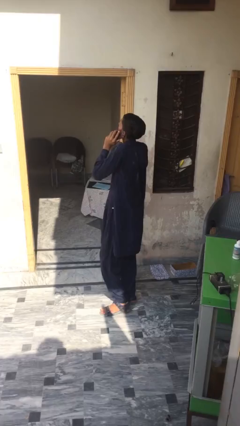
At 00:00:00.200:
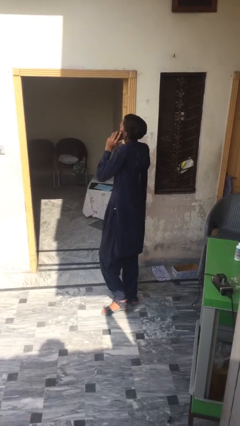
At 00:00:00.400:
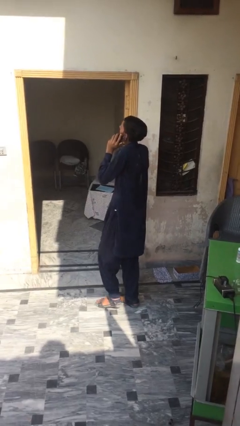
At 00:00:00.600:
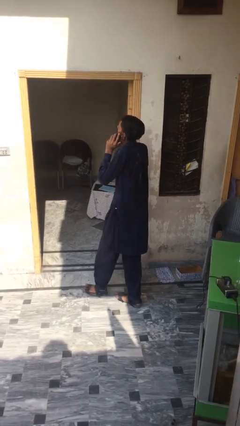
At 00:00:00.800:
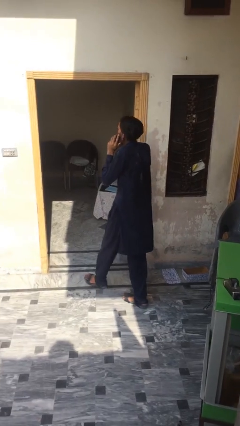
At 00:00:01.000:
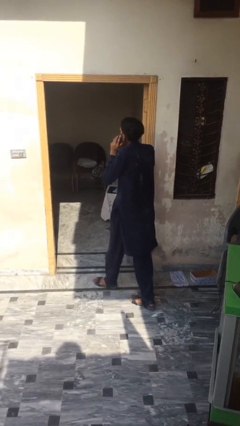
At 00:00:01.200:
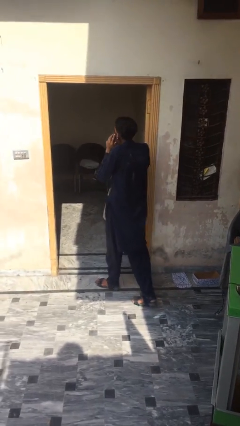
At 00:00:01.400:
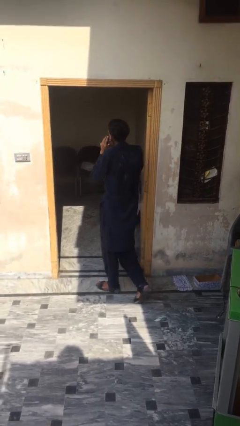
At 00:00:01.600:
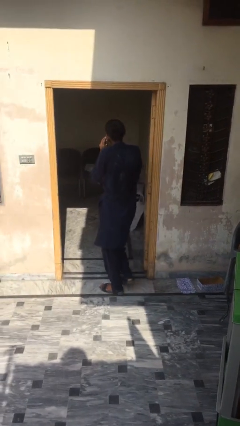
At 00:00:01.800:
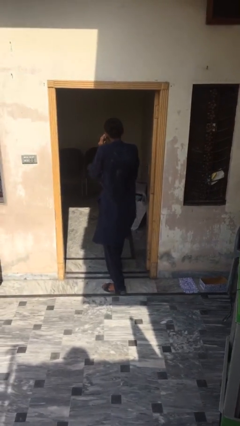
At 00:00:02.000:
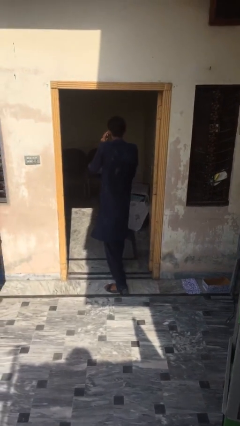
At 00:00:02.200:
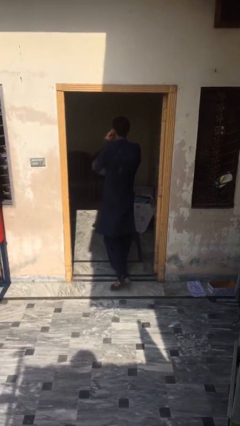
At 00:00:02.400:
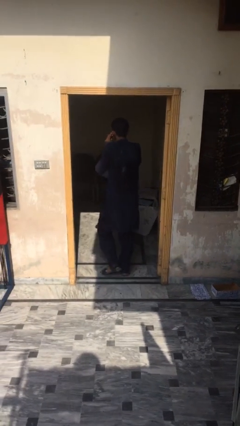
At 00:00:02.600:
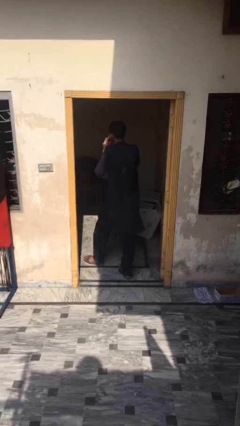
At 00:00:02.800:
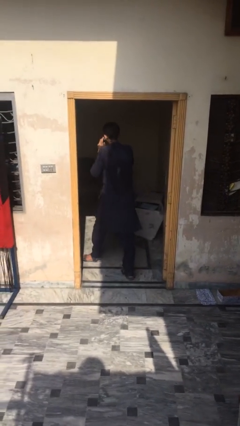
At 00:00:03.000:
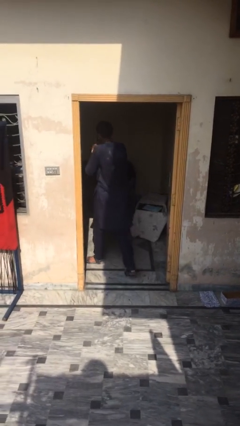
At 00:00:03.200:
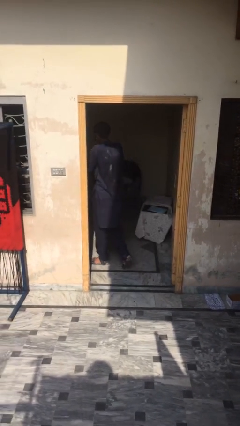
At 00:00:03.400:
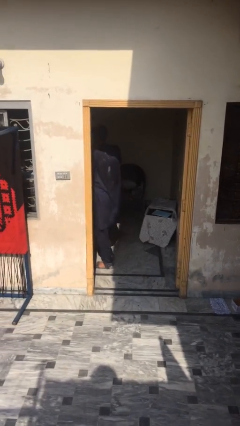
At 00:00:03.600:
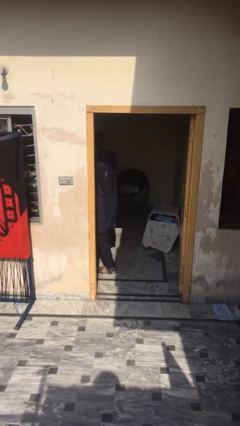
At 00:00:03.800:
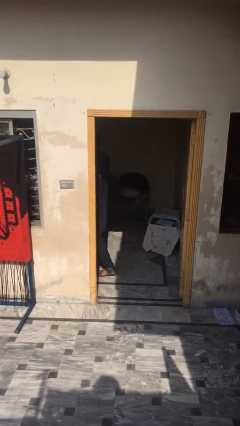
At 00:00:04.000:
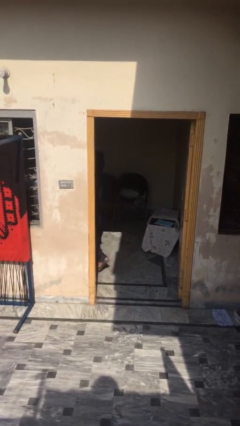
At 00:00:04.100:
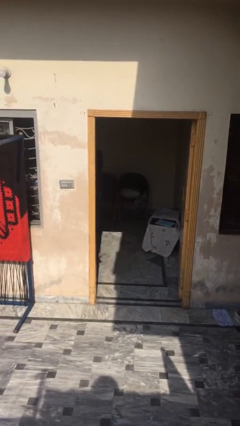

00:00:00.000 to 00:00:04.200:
person exits scene through structure

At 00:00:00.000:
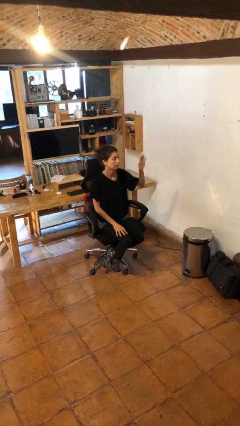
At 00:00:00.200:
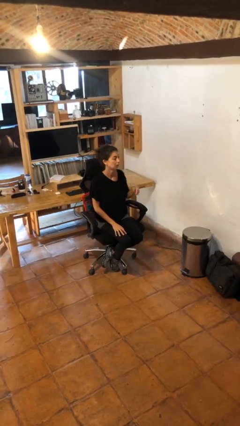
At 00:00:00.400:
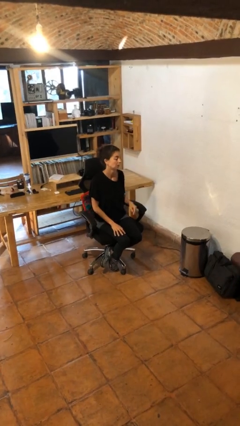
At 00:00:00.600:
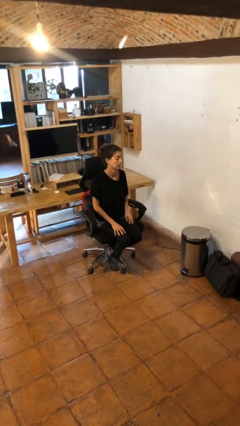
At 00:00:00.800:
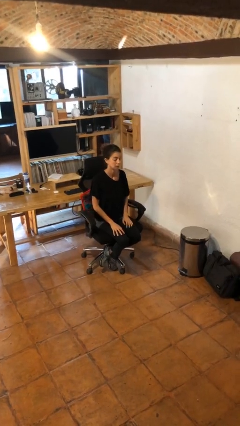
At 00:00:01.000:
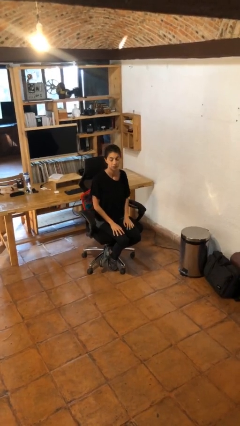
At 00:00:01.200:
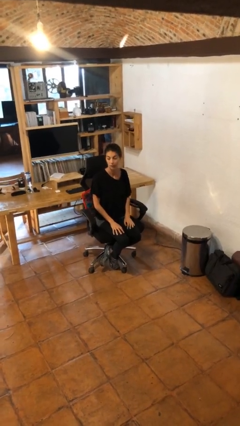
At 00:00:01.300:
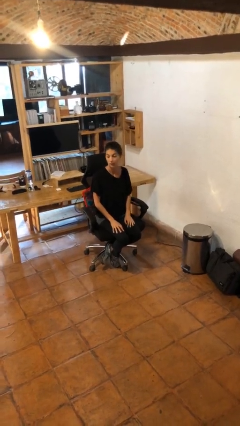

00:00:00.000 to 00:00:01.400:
person gestures lower hand

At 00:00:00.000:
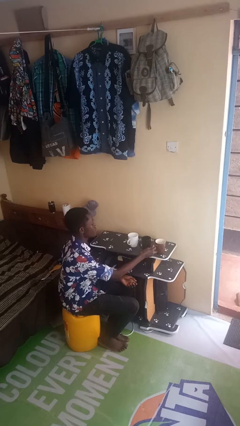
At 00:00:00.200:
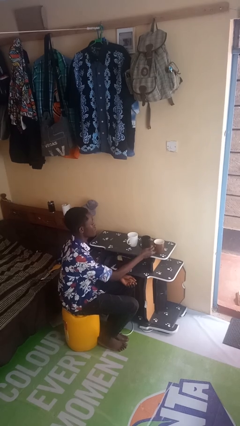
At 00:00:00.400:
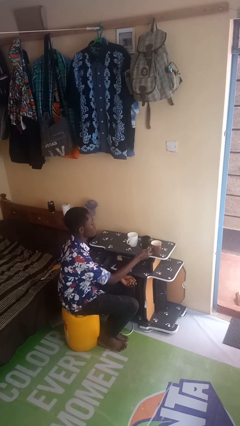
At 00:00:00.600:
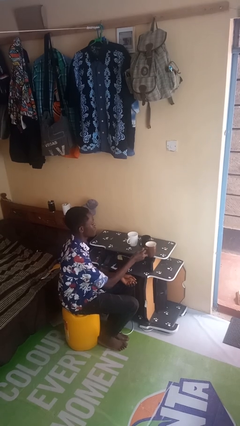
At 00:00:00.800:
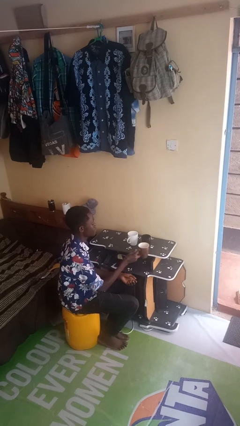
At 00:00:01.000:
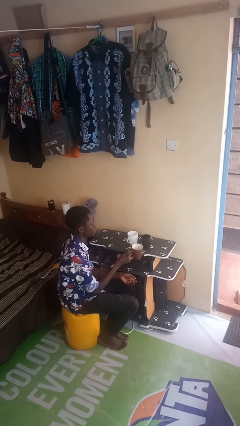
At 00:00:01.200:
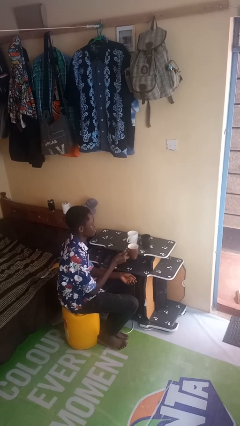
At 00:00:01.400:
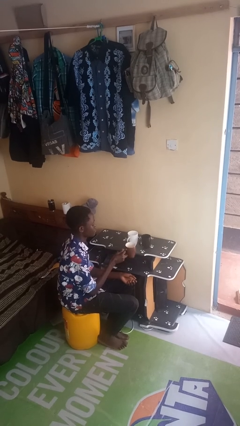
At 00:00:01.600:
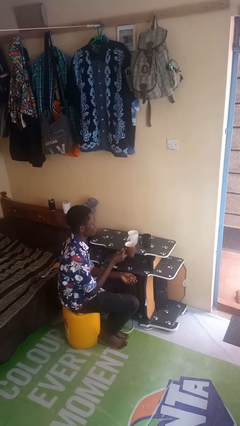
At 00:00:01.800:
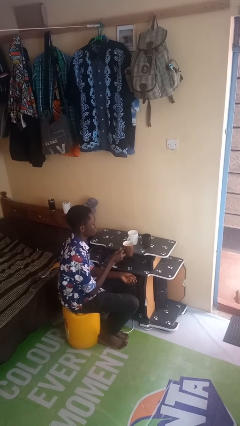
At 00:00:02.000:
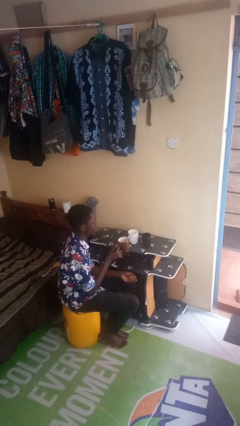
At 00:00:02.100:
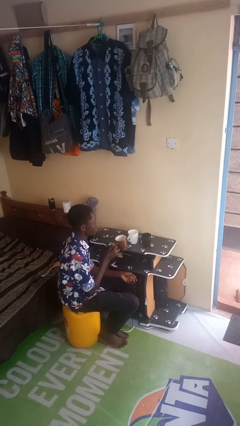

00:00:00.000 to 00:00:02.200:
person picks up object from table

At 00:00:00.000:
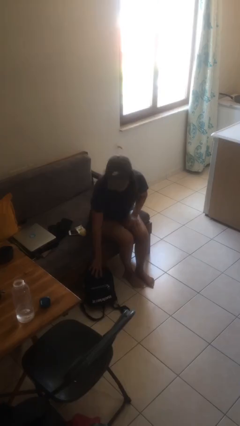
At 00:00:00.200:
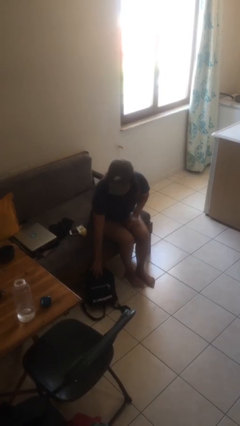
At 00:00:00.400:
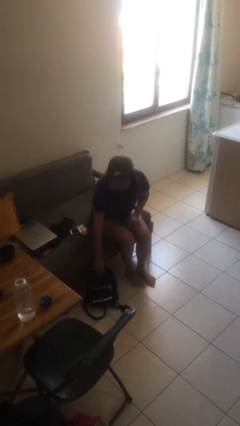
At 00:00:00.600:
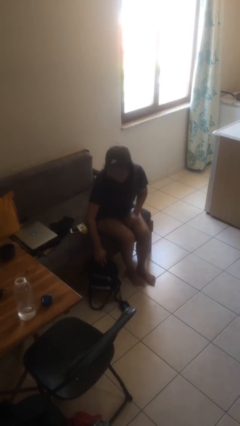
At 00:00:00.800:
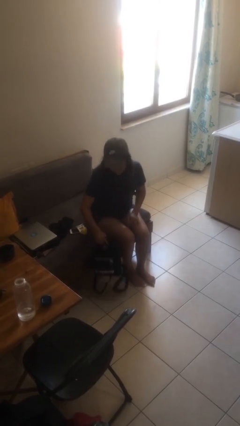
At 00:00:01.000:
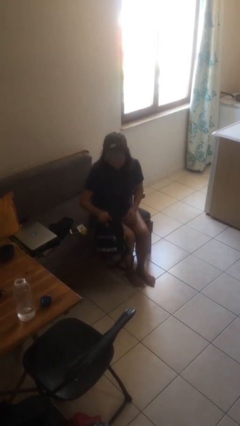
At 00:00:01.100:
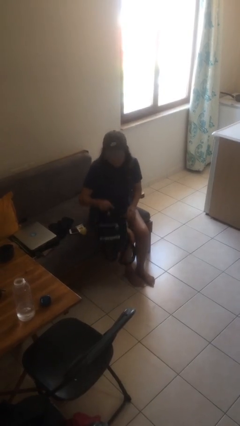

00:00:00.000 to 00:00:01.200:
person picks up object from floor

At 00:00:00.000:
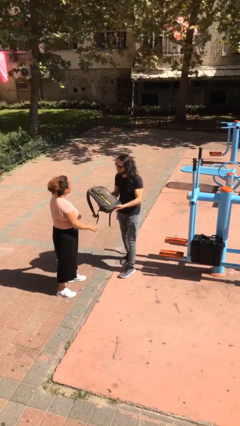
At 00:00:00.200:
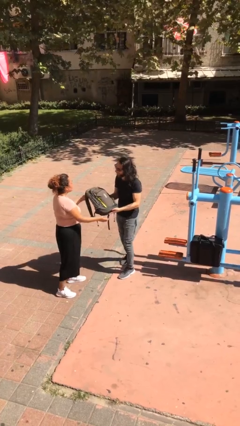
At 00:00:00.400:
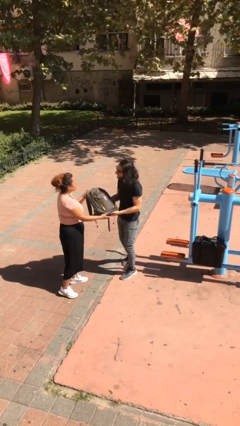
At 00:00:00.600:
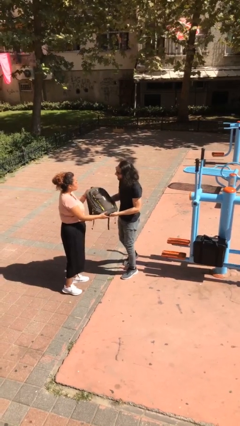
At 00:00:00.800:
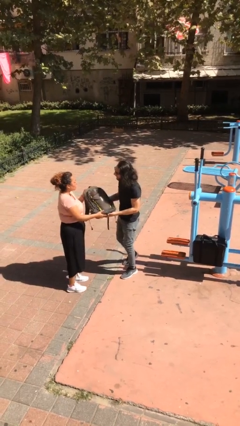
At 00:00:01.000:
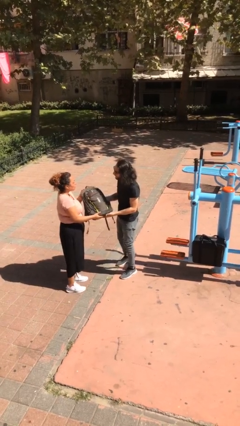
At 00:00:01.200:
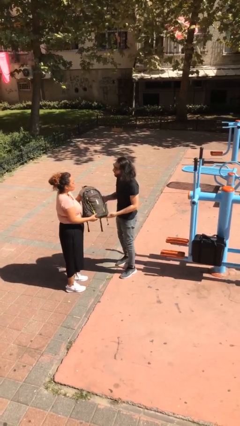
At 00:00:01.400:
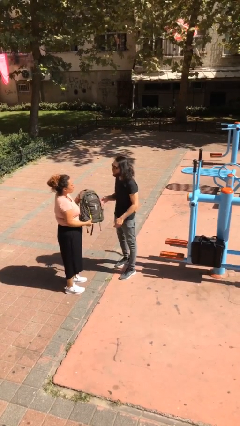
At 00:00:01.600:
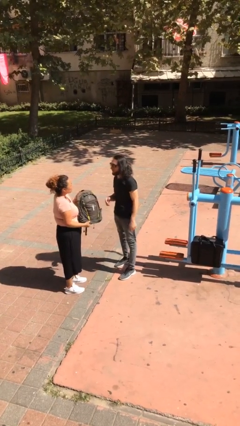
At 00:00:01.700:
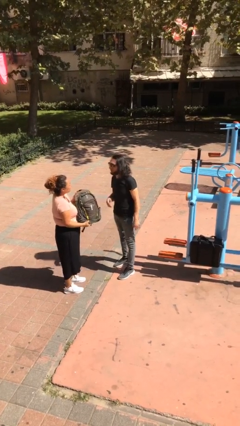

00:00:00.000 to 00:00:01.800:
person transfers object to person

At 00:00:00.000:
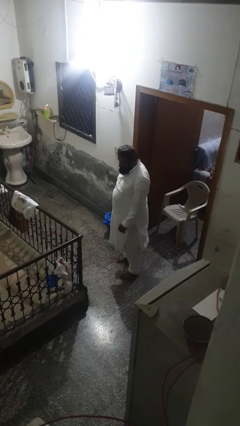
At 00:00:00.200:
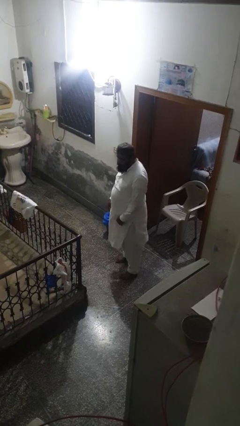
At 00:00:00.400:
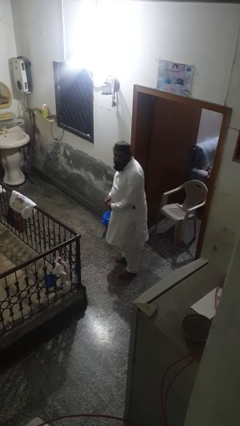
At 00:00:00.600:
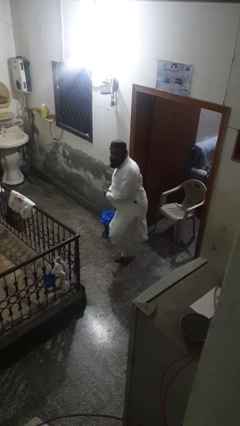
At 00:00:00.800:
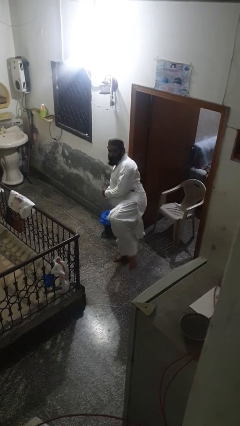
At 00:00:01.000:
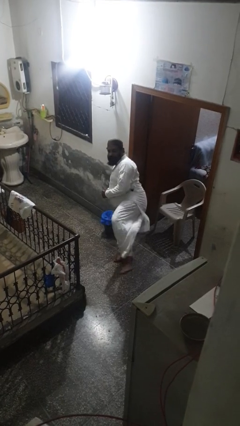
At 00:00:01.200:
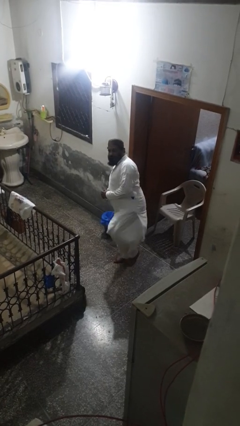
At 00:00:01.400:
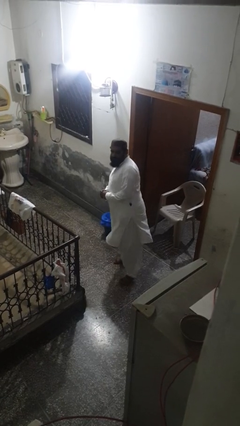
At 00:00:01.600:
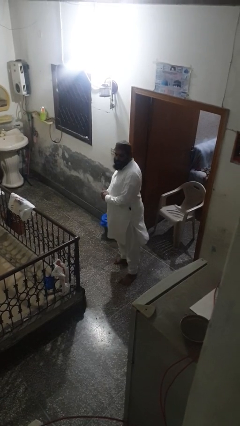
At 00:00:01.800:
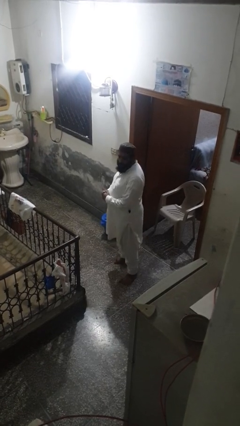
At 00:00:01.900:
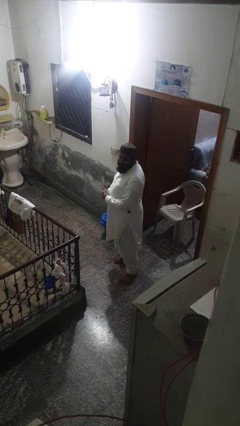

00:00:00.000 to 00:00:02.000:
person karate kicks

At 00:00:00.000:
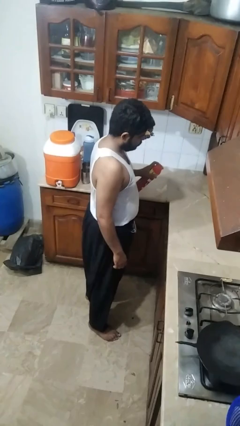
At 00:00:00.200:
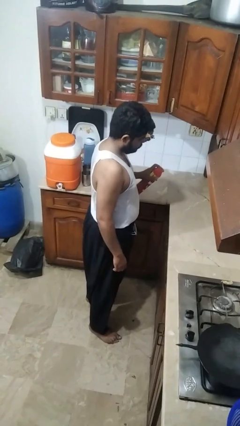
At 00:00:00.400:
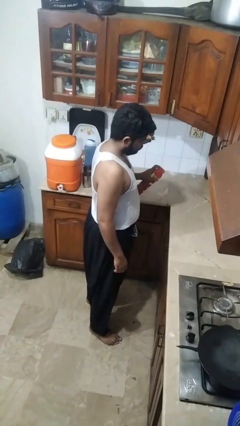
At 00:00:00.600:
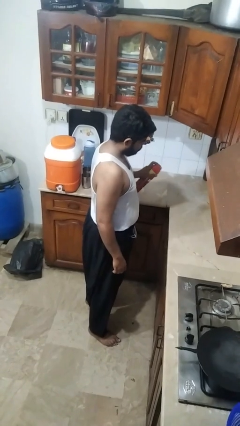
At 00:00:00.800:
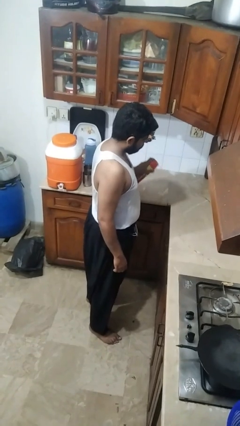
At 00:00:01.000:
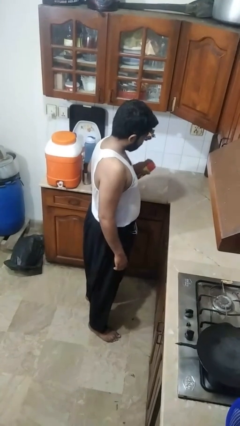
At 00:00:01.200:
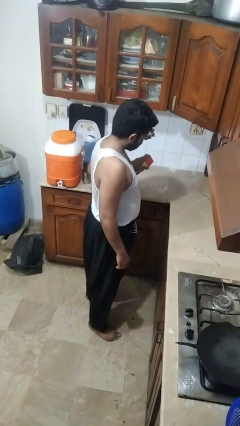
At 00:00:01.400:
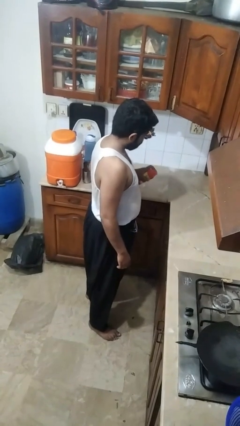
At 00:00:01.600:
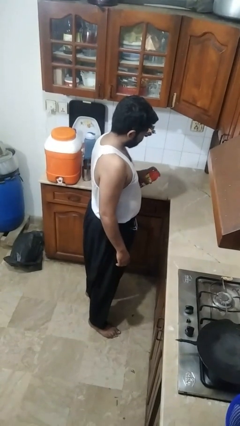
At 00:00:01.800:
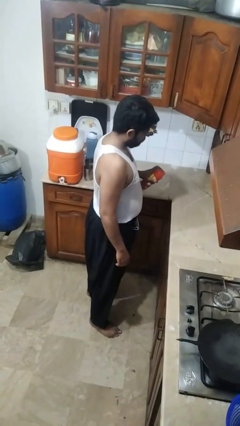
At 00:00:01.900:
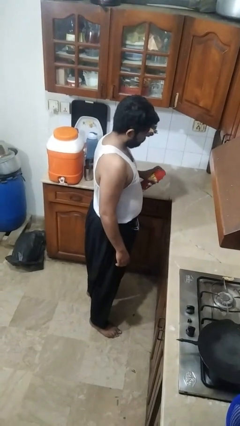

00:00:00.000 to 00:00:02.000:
person sprays from bottle

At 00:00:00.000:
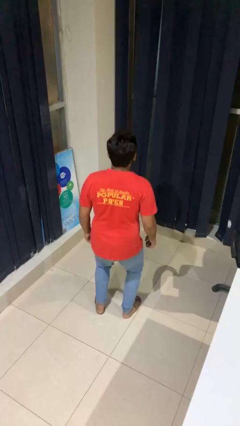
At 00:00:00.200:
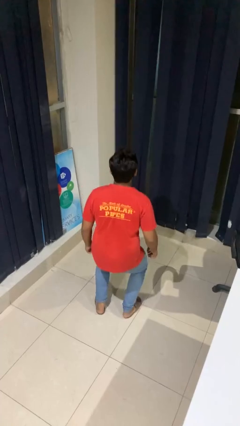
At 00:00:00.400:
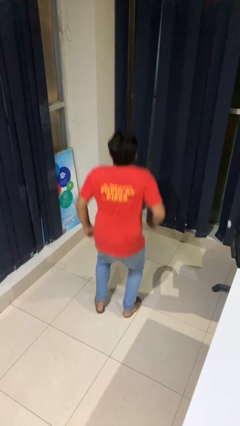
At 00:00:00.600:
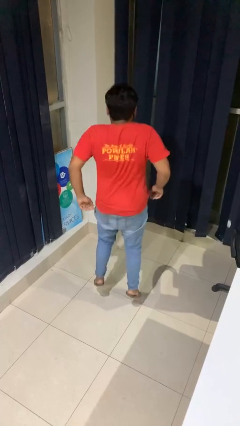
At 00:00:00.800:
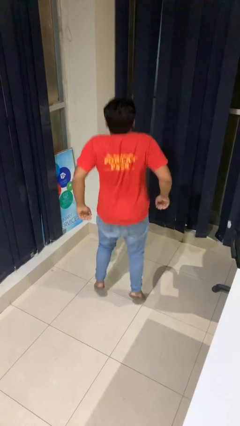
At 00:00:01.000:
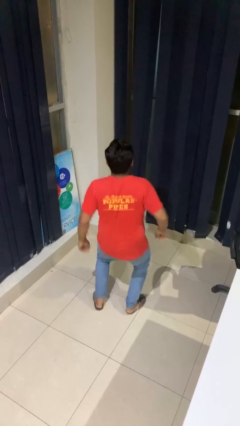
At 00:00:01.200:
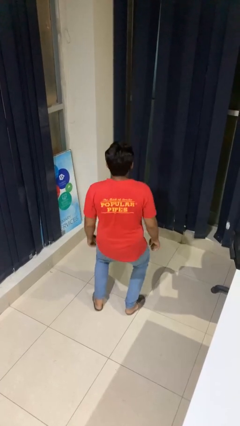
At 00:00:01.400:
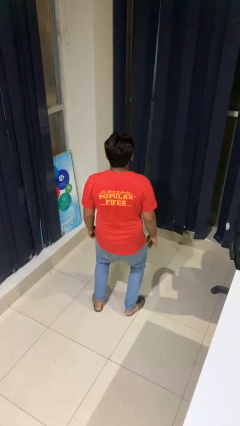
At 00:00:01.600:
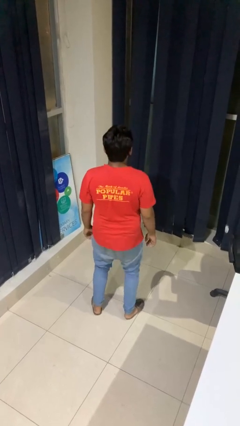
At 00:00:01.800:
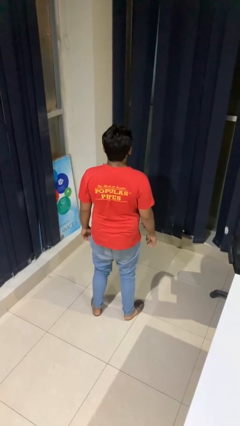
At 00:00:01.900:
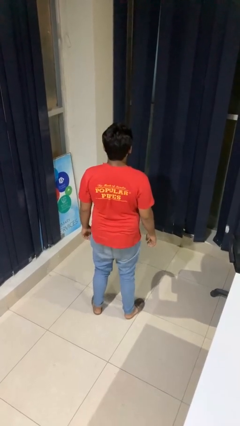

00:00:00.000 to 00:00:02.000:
person jumps
